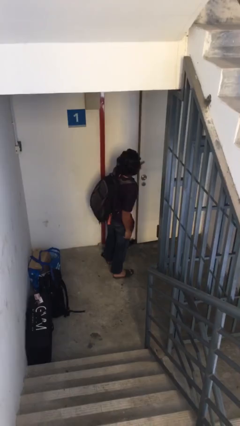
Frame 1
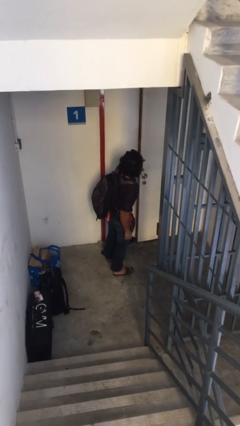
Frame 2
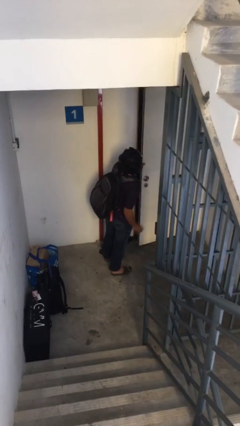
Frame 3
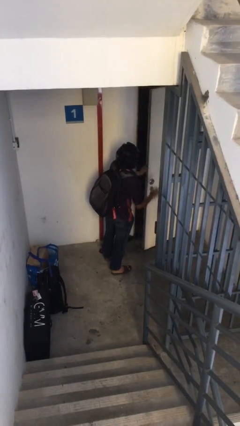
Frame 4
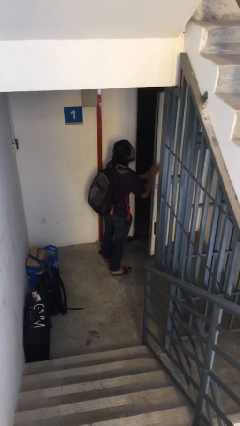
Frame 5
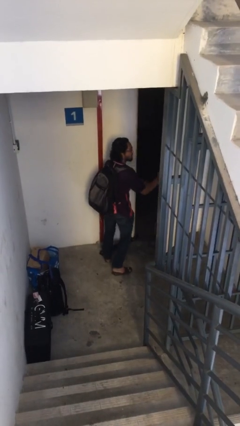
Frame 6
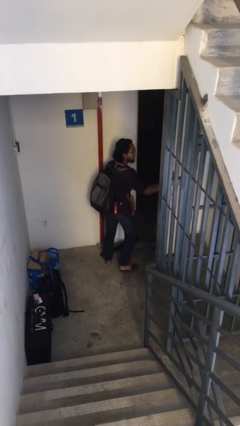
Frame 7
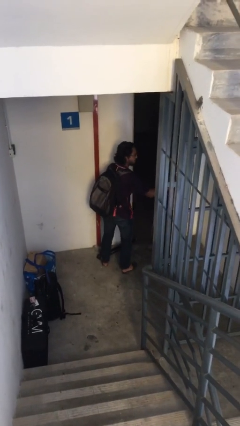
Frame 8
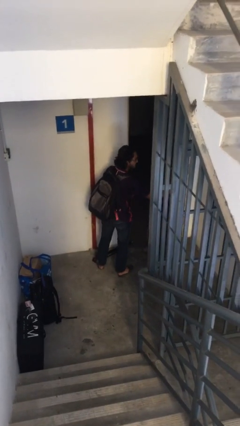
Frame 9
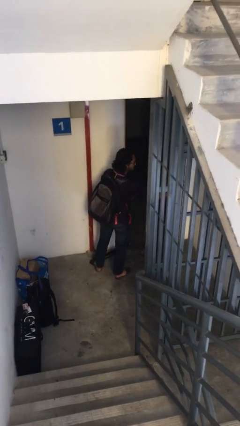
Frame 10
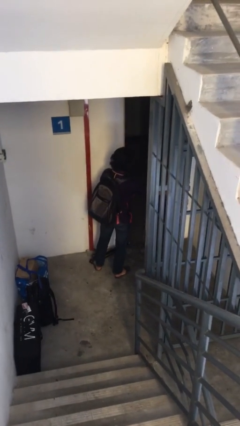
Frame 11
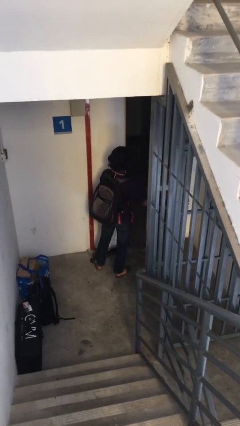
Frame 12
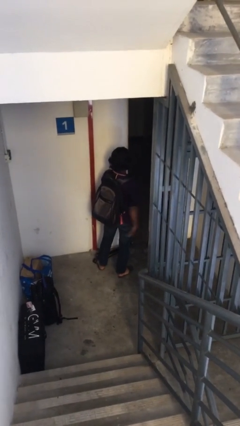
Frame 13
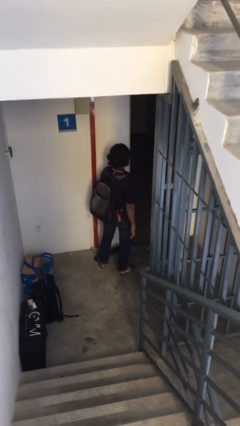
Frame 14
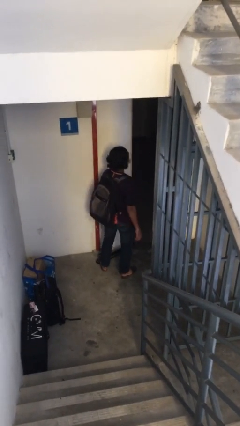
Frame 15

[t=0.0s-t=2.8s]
person opens facility door

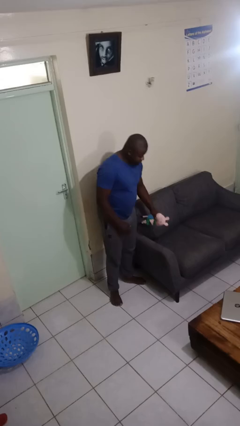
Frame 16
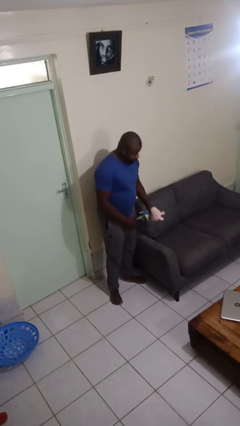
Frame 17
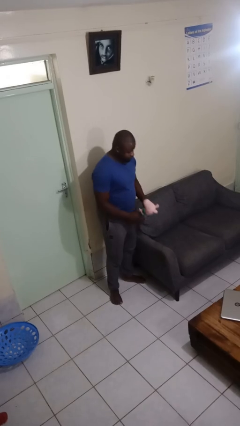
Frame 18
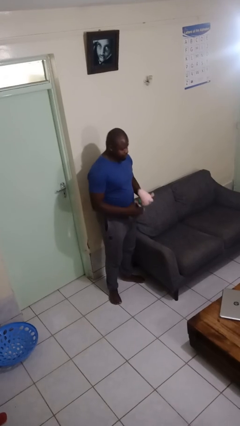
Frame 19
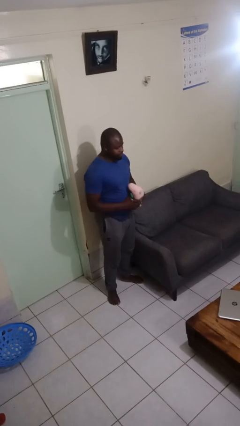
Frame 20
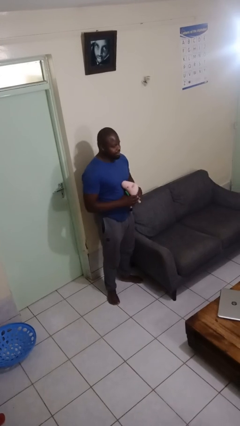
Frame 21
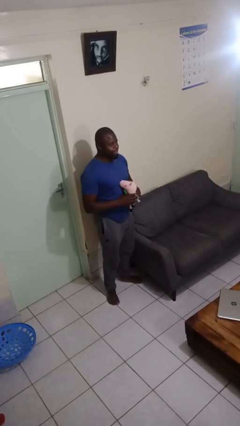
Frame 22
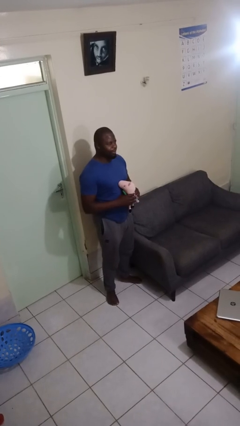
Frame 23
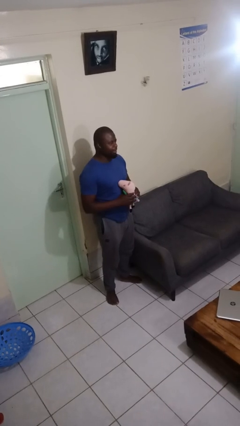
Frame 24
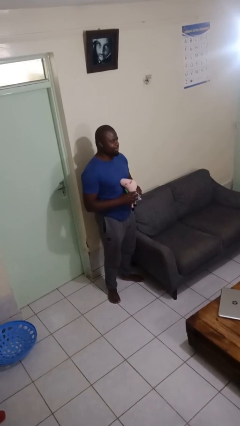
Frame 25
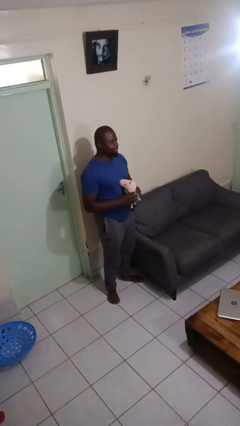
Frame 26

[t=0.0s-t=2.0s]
person picks up object from couch

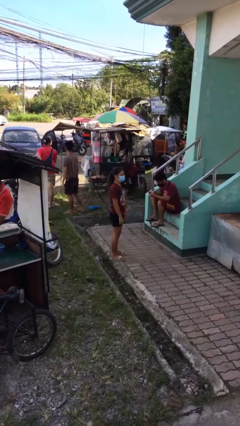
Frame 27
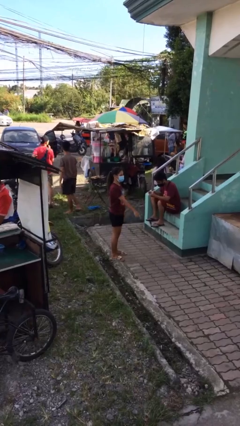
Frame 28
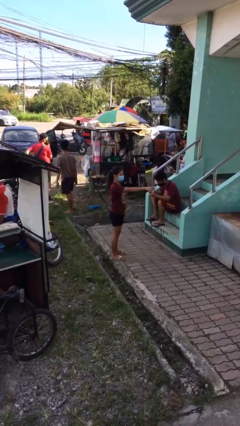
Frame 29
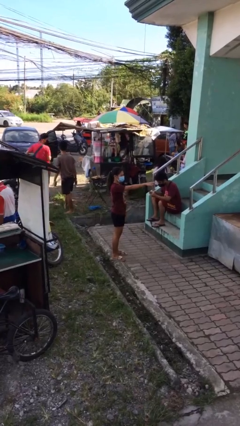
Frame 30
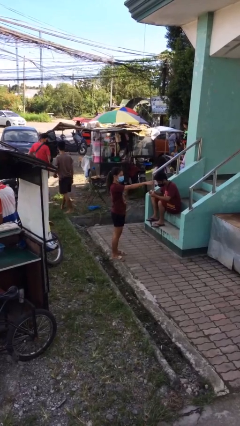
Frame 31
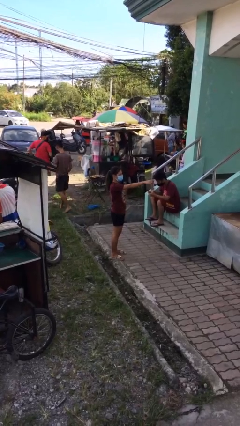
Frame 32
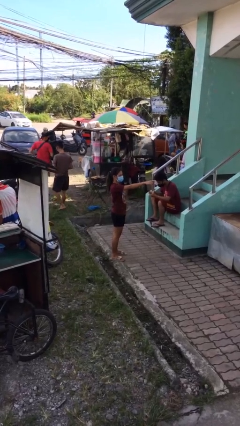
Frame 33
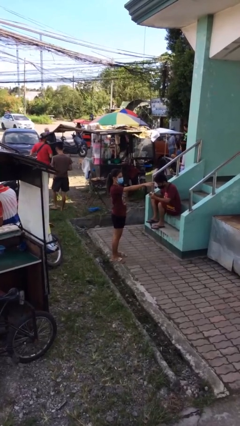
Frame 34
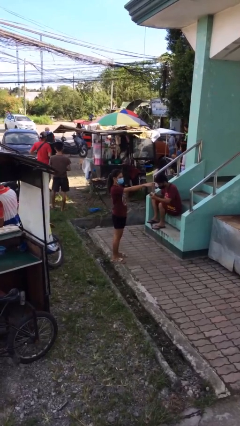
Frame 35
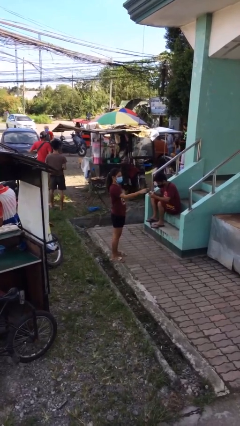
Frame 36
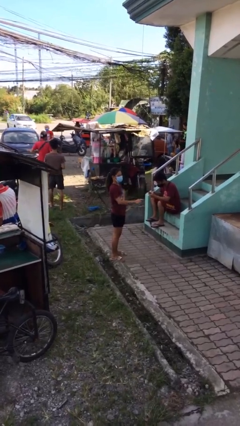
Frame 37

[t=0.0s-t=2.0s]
person points at person

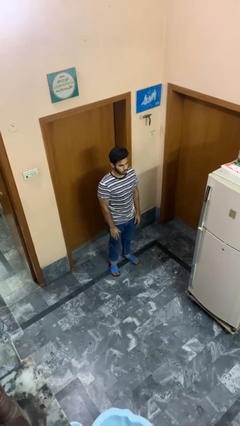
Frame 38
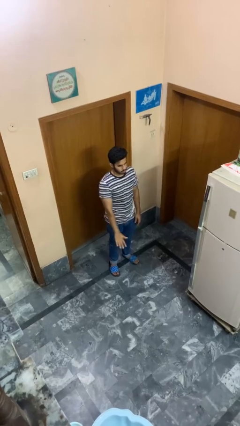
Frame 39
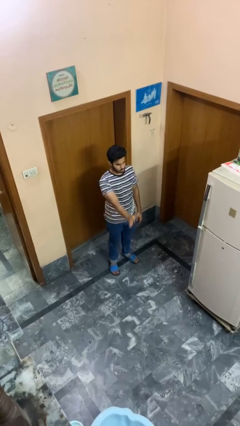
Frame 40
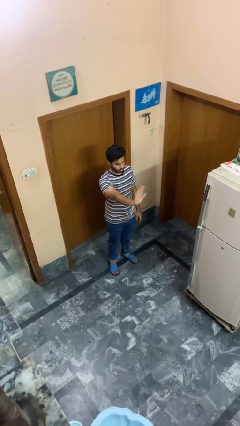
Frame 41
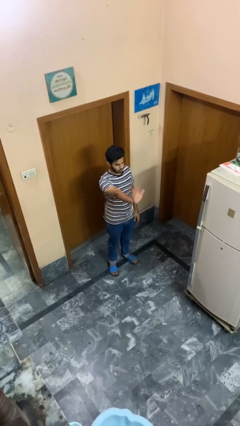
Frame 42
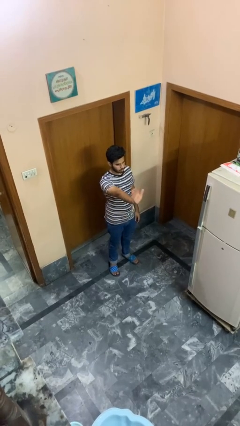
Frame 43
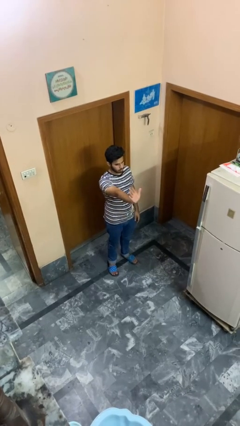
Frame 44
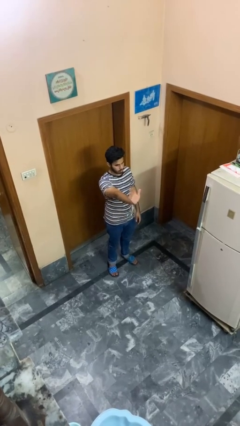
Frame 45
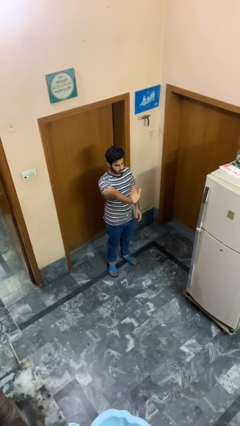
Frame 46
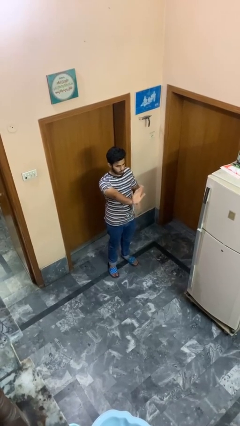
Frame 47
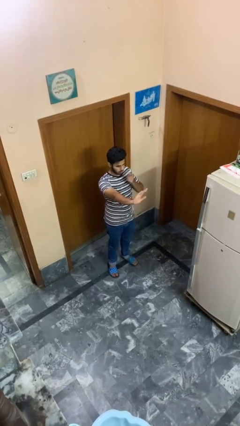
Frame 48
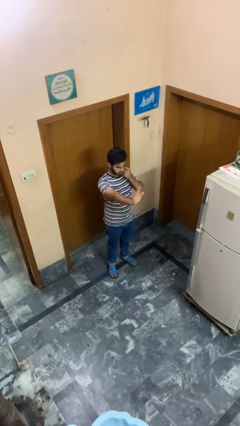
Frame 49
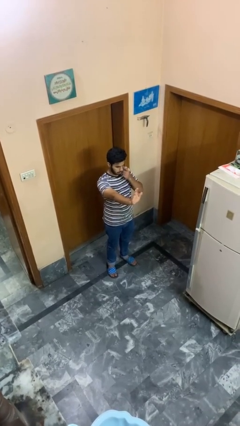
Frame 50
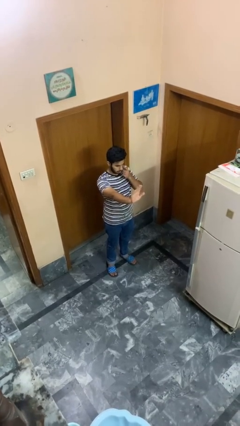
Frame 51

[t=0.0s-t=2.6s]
person waves at person

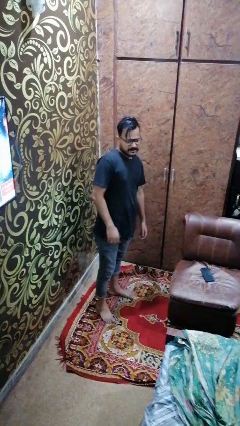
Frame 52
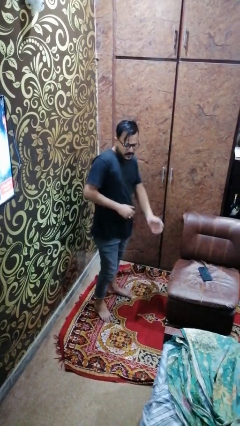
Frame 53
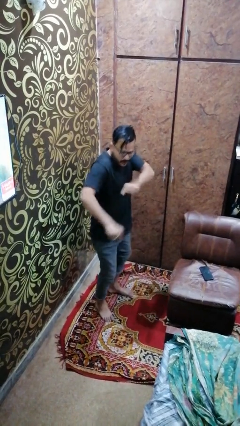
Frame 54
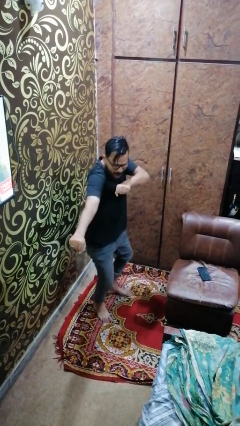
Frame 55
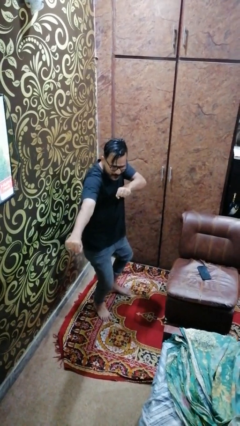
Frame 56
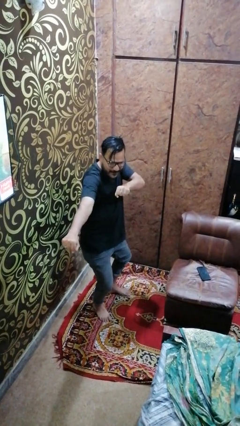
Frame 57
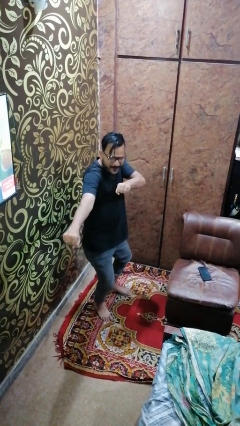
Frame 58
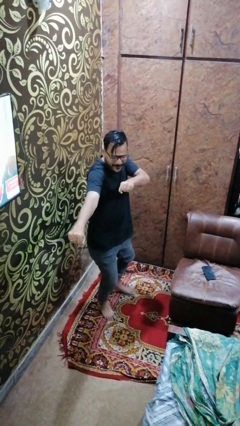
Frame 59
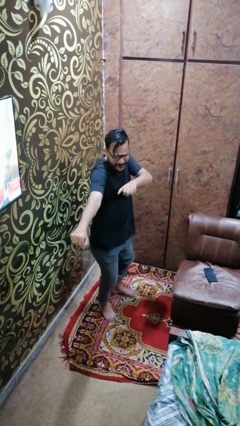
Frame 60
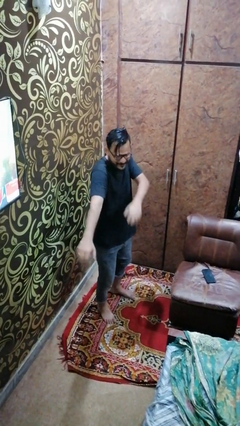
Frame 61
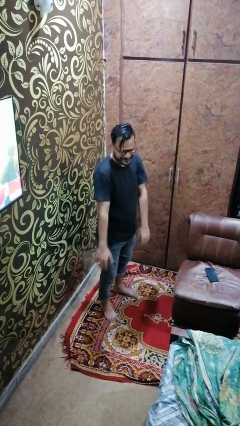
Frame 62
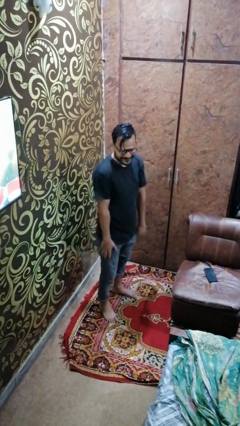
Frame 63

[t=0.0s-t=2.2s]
person karate chop

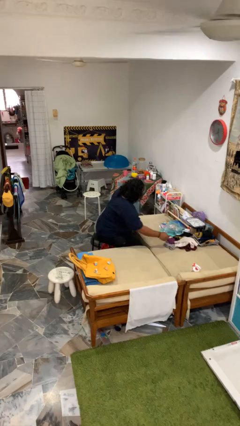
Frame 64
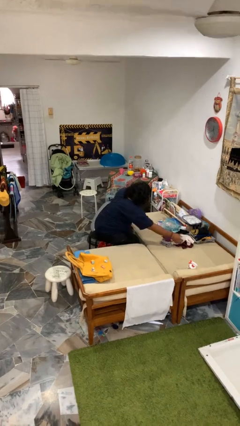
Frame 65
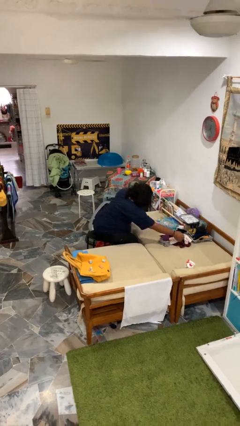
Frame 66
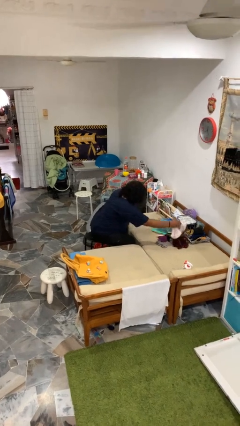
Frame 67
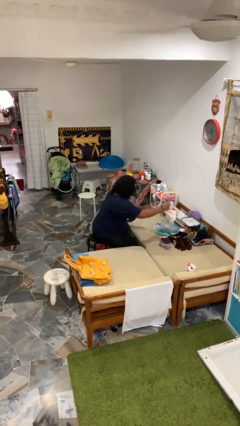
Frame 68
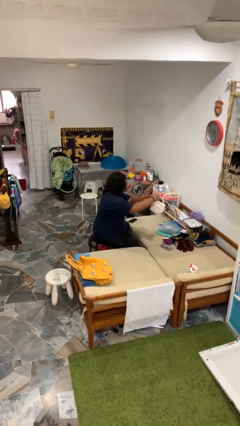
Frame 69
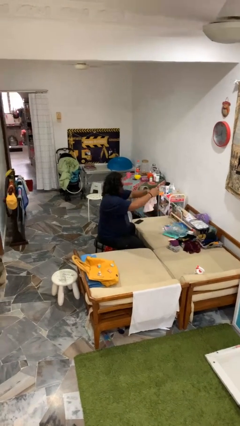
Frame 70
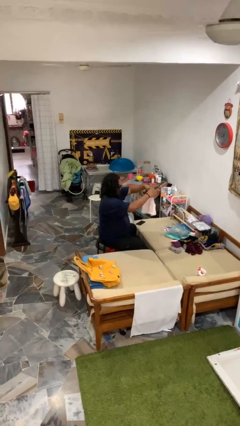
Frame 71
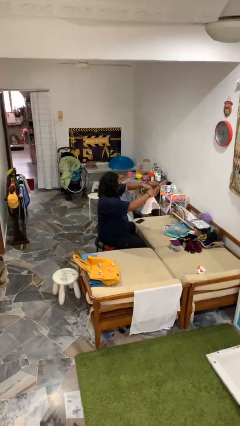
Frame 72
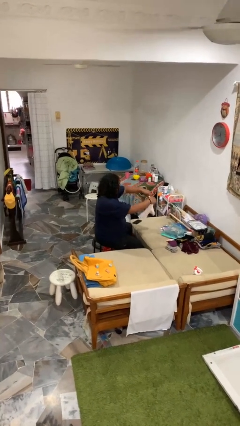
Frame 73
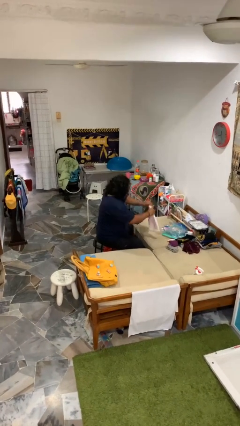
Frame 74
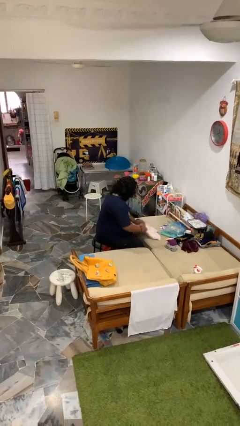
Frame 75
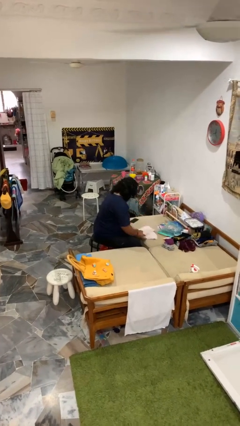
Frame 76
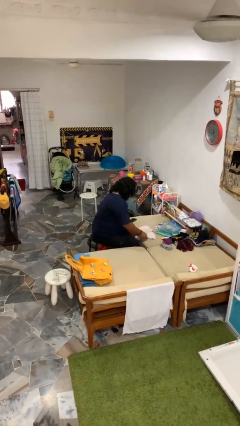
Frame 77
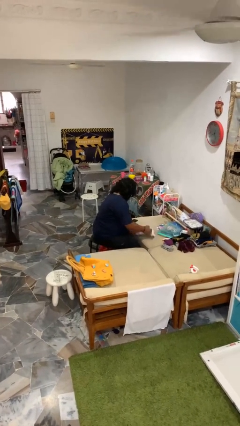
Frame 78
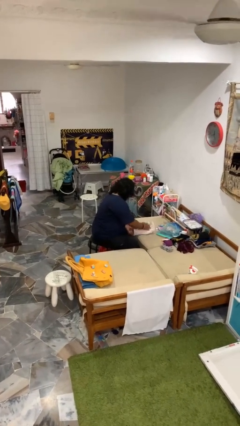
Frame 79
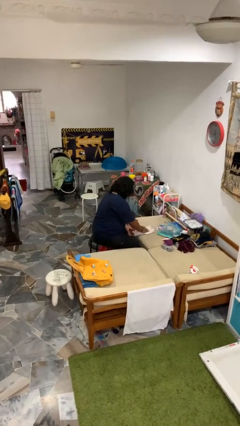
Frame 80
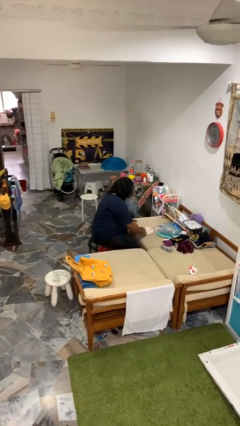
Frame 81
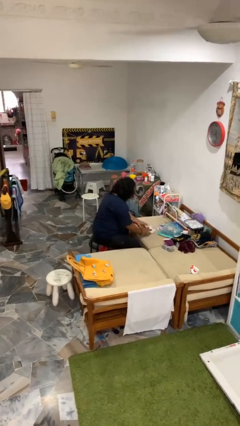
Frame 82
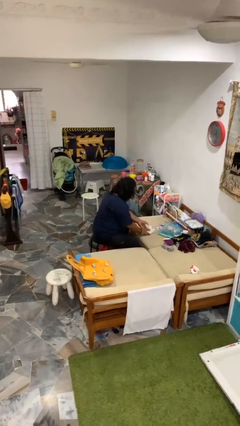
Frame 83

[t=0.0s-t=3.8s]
person folds pants

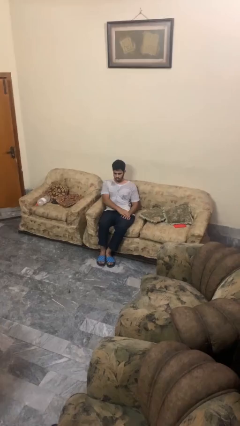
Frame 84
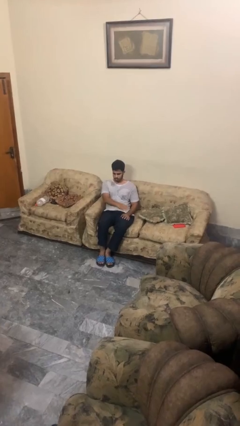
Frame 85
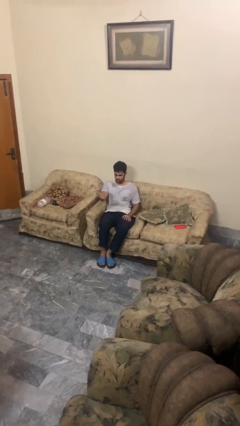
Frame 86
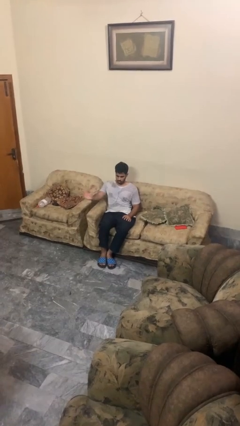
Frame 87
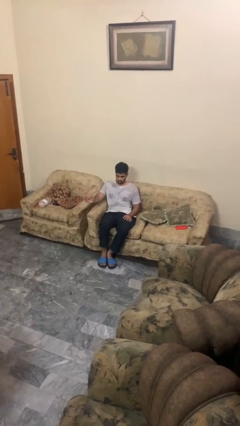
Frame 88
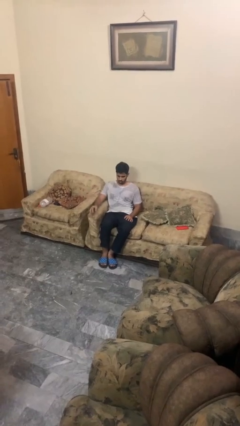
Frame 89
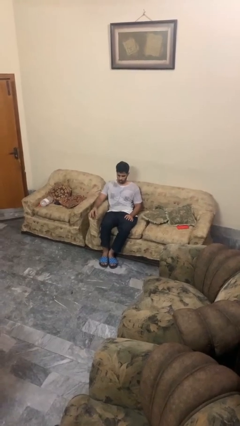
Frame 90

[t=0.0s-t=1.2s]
person gestures swipe right

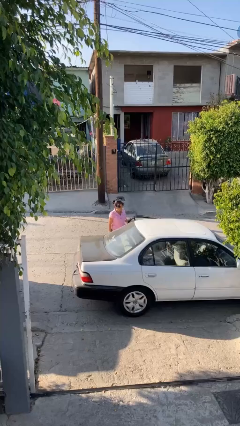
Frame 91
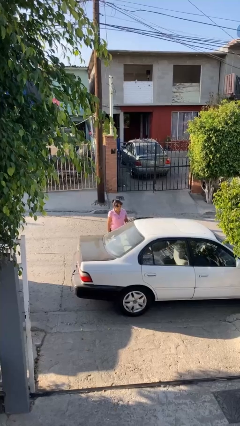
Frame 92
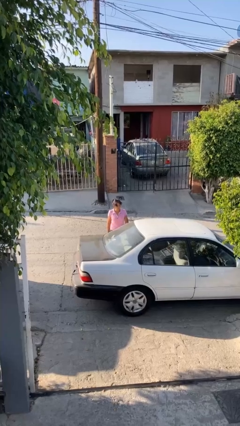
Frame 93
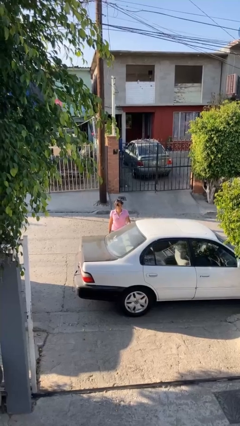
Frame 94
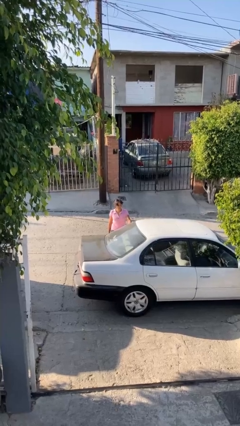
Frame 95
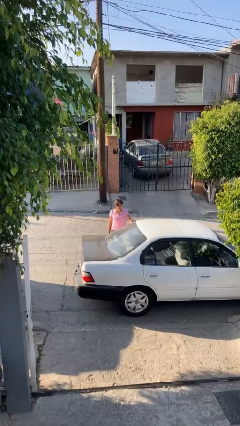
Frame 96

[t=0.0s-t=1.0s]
person closes car door
